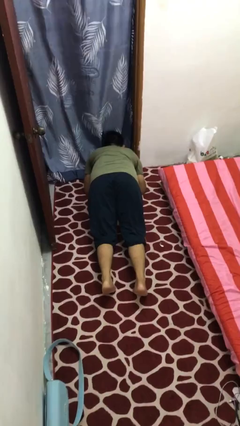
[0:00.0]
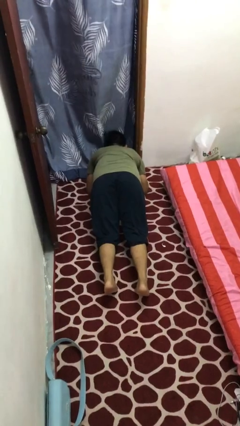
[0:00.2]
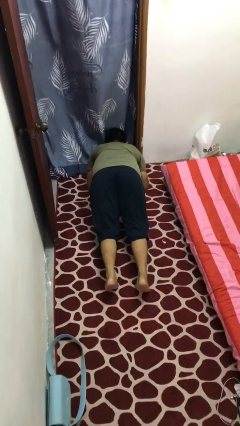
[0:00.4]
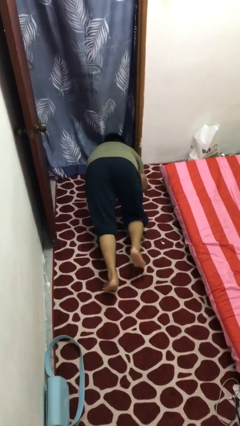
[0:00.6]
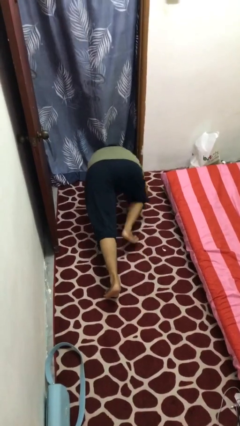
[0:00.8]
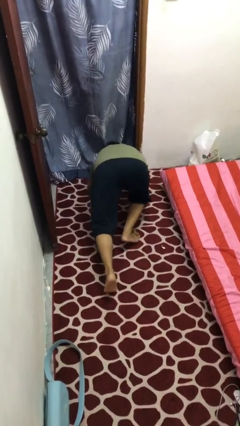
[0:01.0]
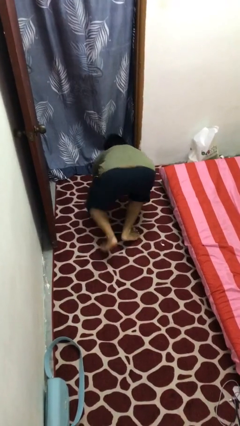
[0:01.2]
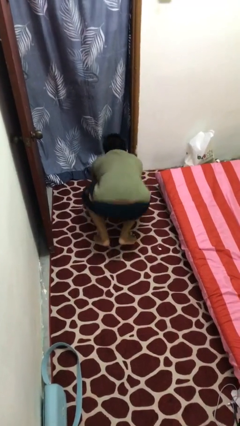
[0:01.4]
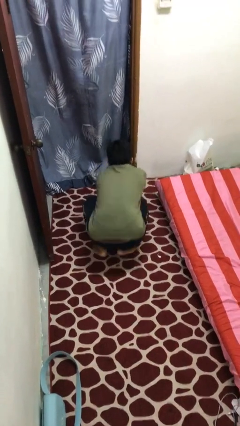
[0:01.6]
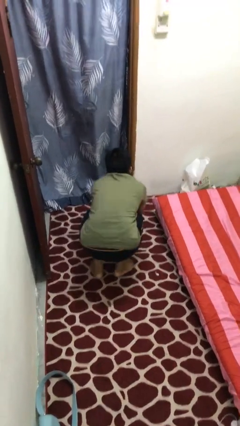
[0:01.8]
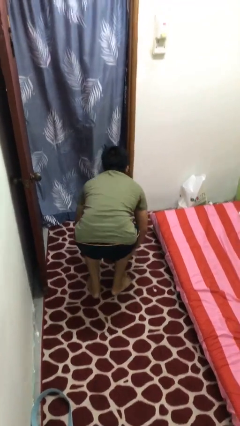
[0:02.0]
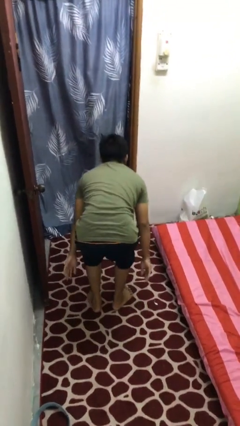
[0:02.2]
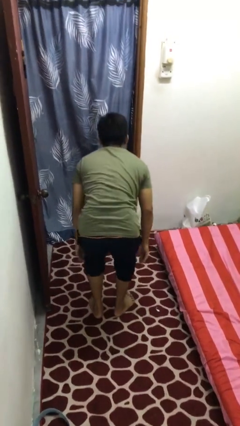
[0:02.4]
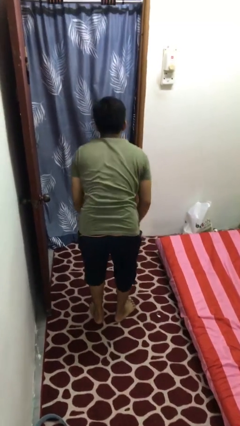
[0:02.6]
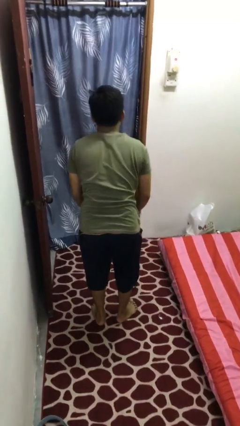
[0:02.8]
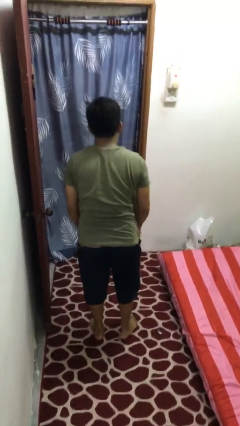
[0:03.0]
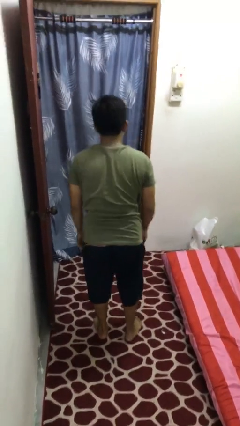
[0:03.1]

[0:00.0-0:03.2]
person stands up from floor

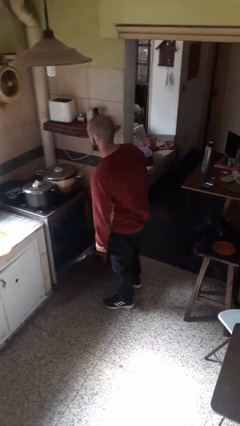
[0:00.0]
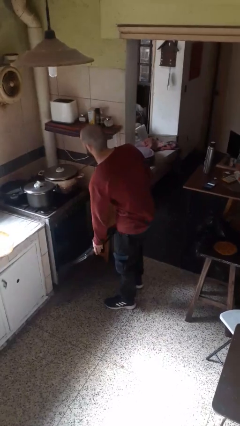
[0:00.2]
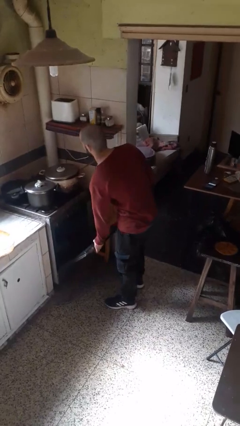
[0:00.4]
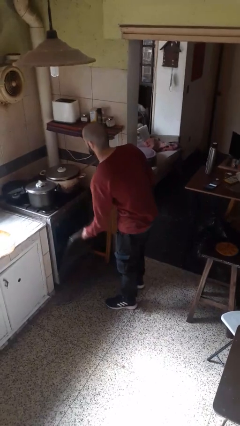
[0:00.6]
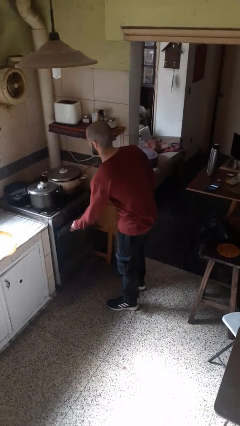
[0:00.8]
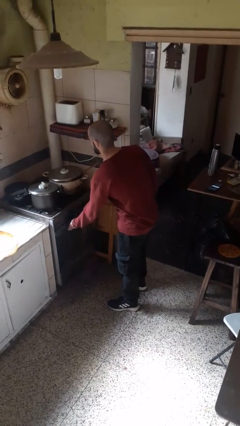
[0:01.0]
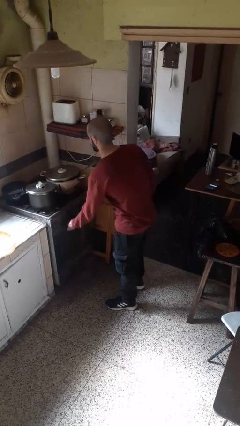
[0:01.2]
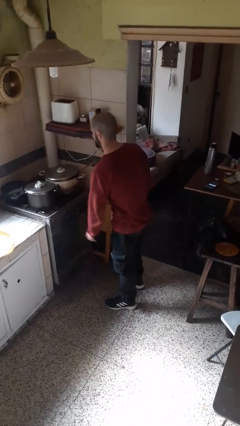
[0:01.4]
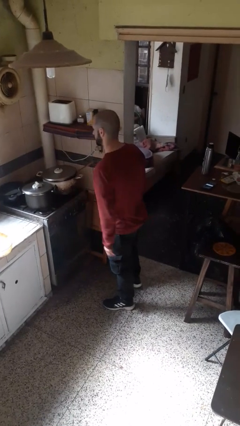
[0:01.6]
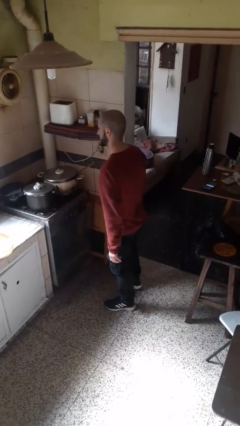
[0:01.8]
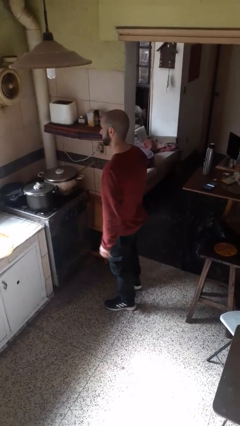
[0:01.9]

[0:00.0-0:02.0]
person closes oven door

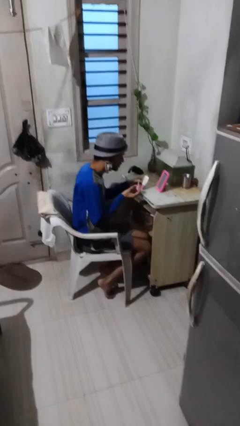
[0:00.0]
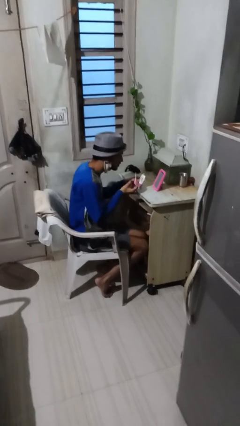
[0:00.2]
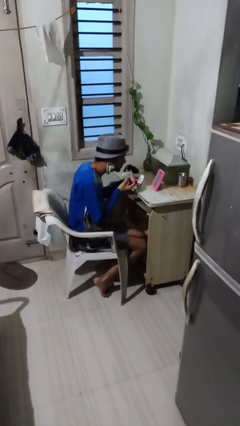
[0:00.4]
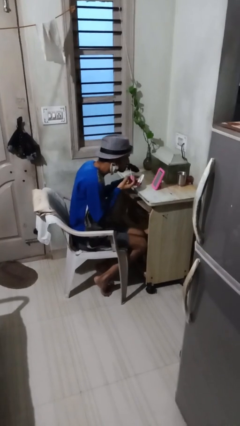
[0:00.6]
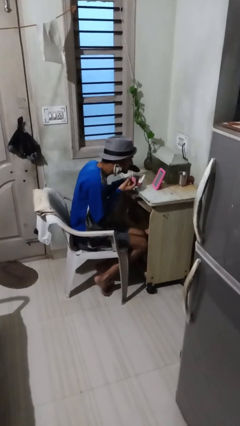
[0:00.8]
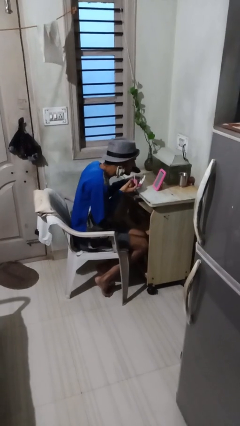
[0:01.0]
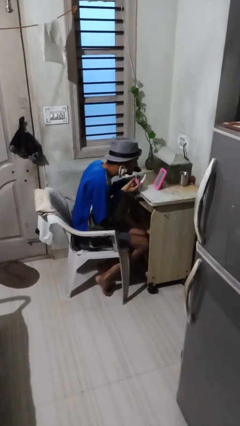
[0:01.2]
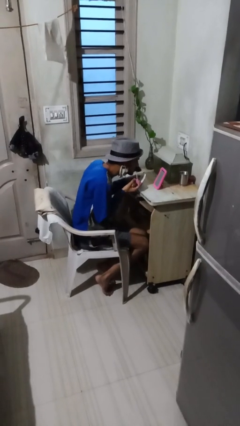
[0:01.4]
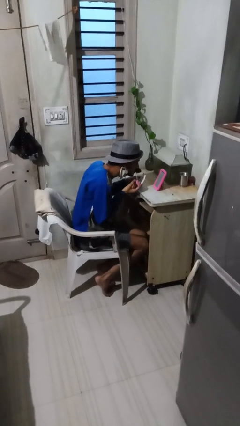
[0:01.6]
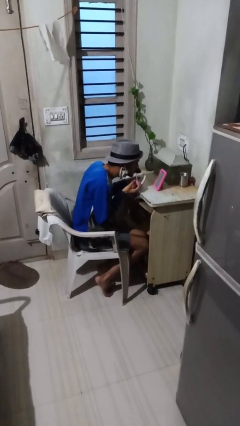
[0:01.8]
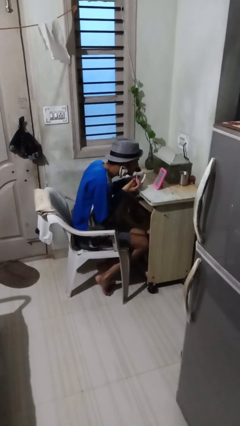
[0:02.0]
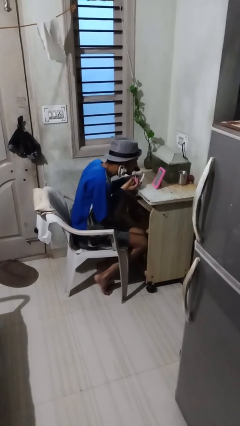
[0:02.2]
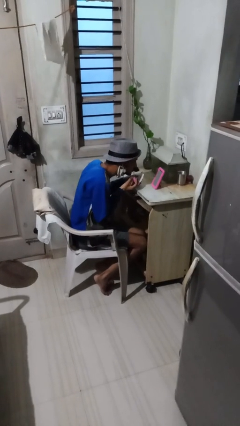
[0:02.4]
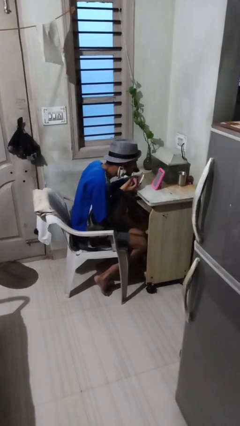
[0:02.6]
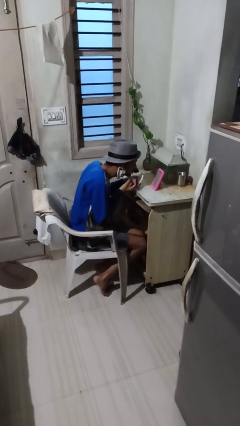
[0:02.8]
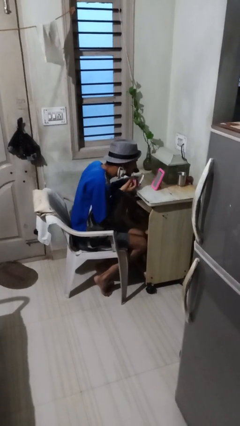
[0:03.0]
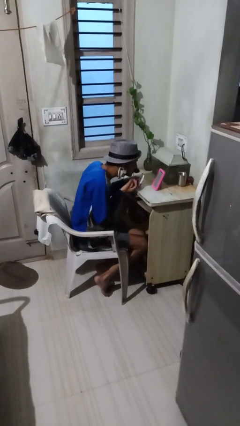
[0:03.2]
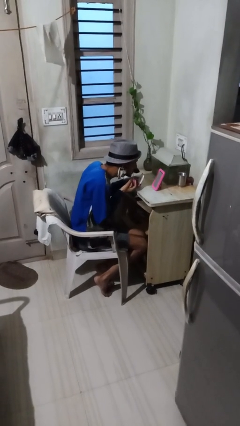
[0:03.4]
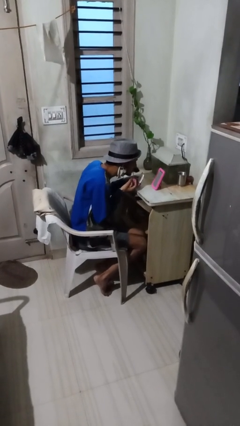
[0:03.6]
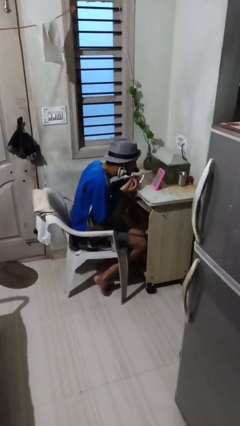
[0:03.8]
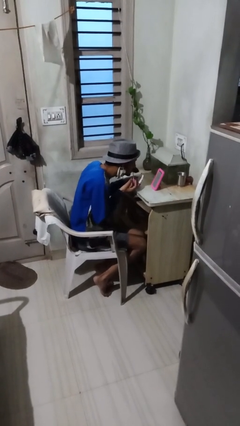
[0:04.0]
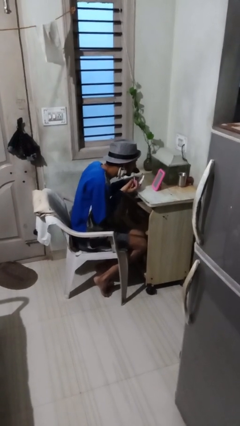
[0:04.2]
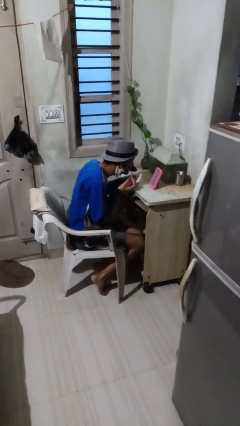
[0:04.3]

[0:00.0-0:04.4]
person applies lip makeup

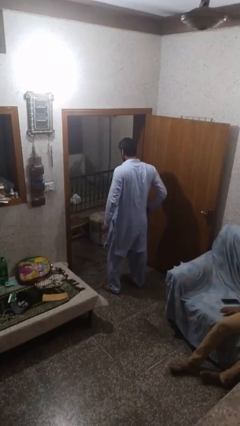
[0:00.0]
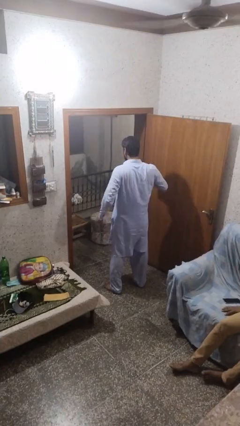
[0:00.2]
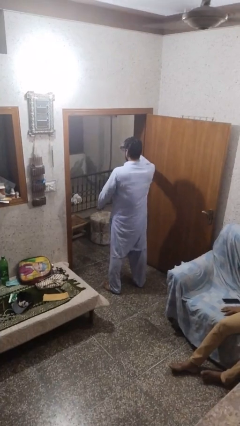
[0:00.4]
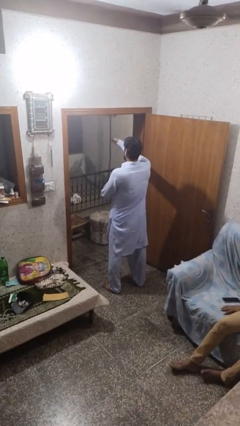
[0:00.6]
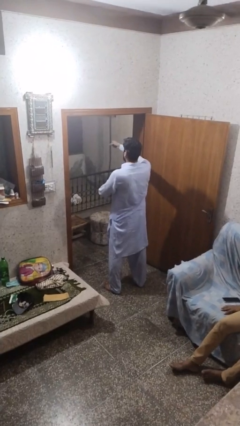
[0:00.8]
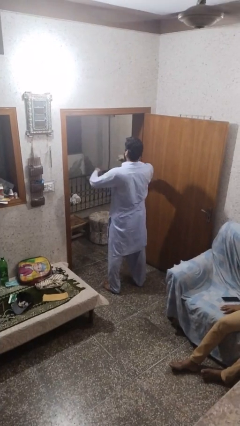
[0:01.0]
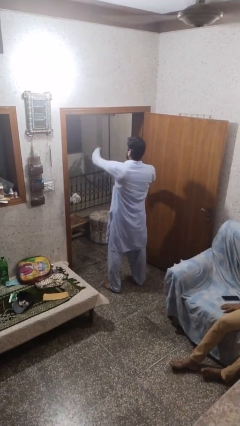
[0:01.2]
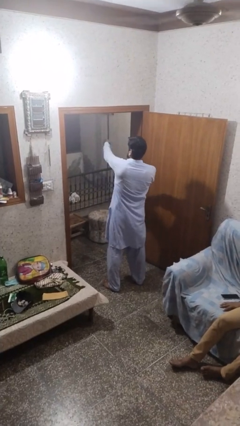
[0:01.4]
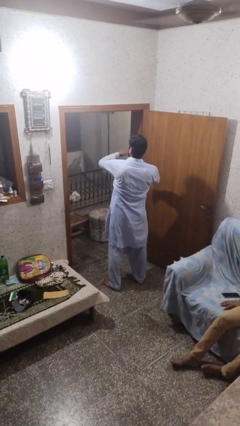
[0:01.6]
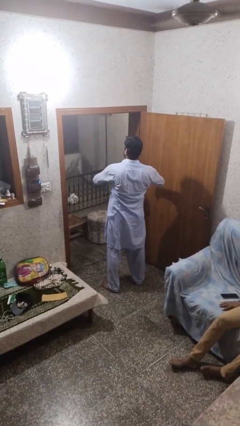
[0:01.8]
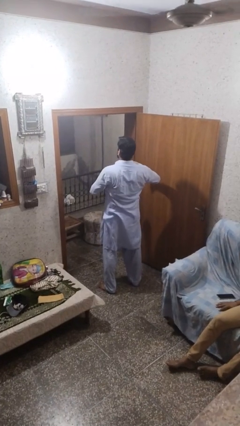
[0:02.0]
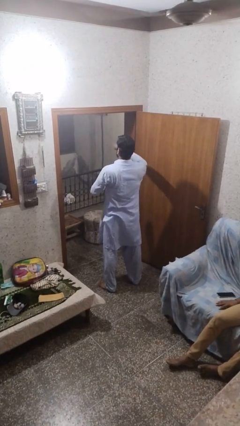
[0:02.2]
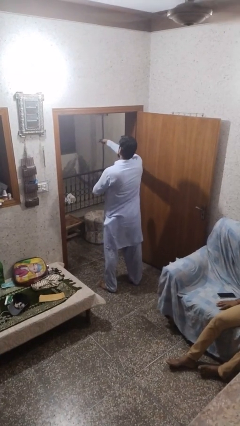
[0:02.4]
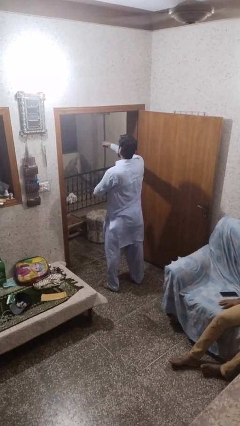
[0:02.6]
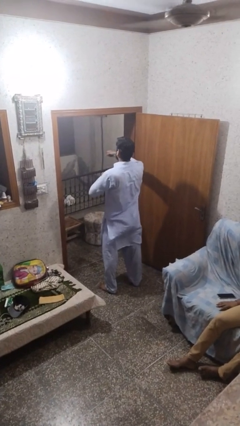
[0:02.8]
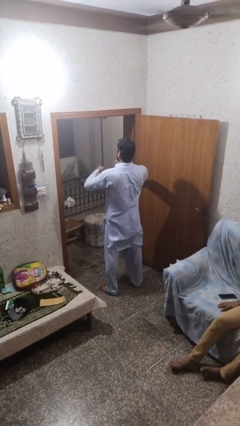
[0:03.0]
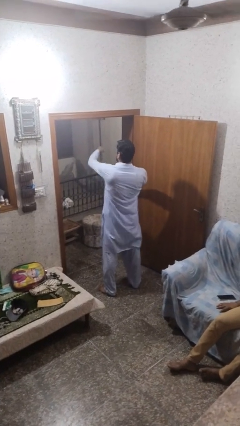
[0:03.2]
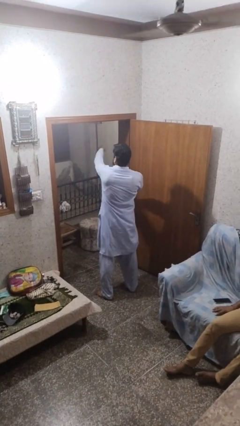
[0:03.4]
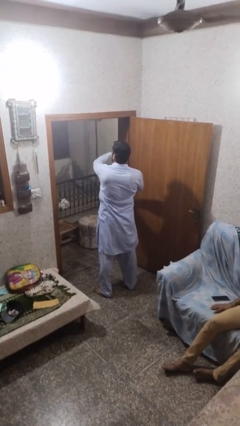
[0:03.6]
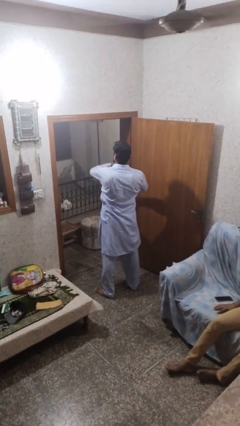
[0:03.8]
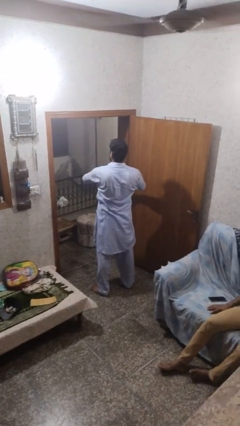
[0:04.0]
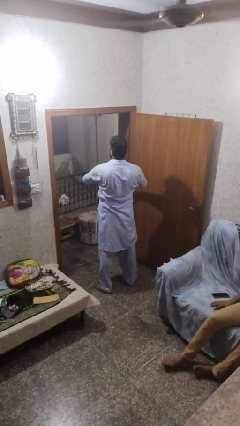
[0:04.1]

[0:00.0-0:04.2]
person punches

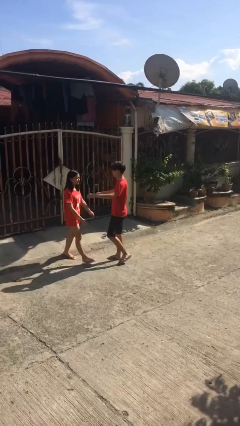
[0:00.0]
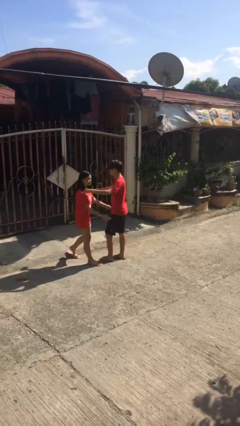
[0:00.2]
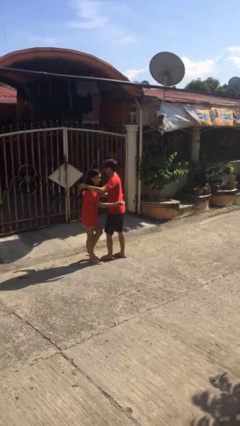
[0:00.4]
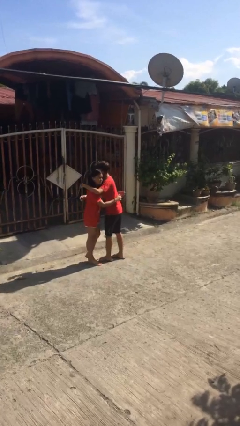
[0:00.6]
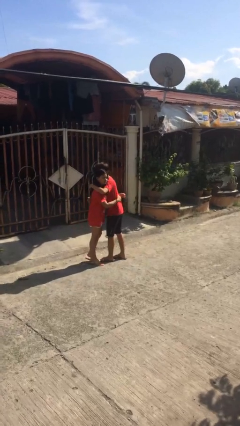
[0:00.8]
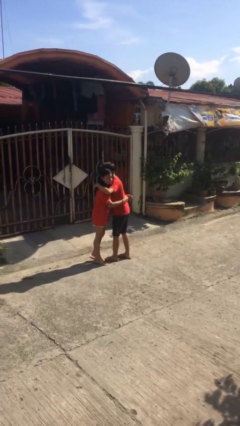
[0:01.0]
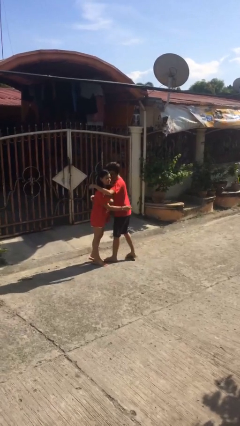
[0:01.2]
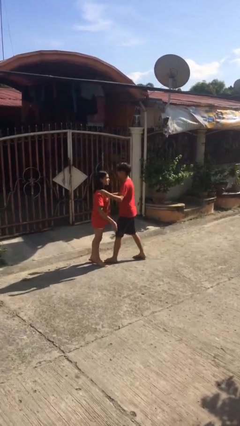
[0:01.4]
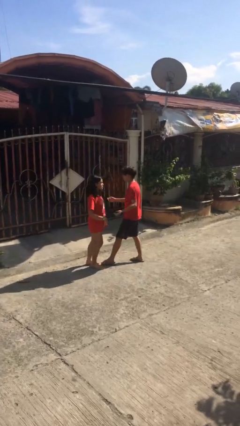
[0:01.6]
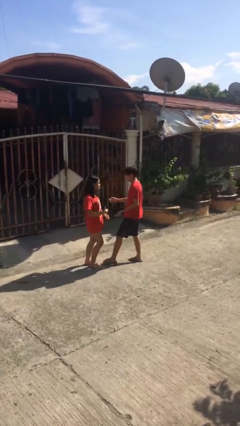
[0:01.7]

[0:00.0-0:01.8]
person embraces person

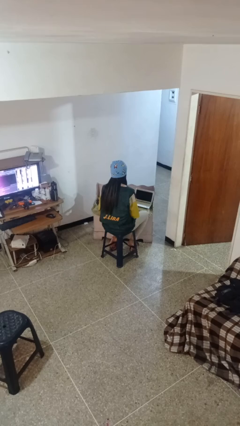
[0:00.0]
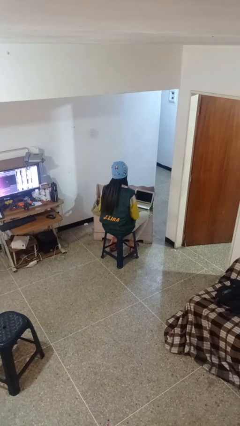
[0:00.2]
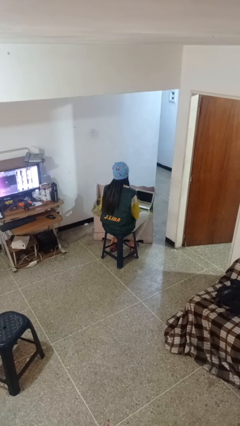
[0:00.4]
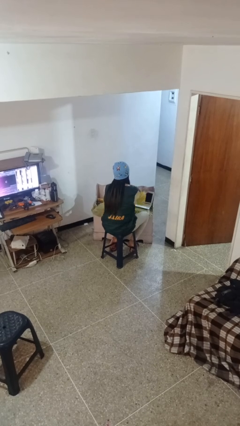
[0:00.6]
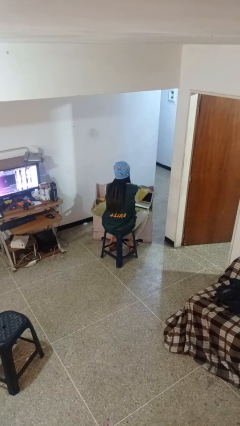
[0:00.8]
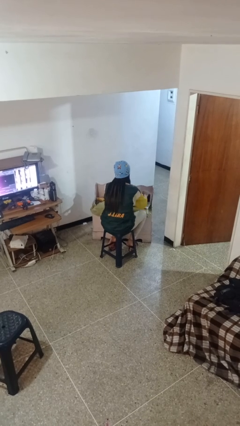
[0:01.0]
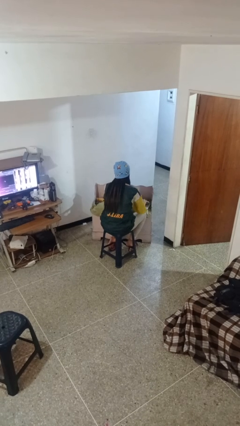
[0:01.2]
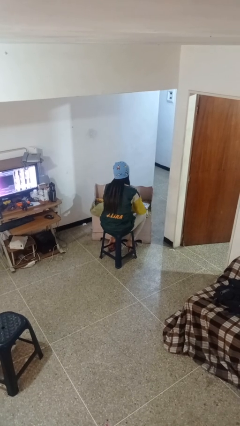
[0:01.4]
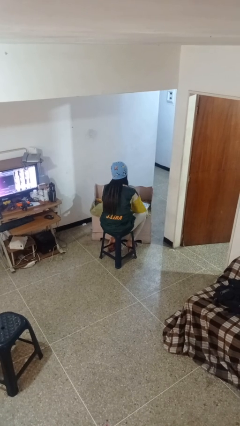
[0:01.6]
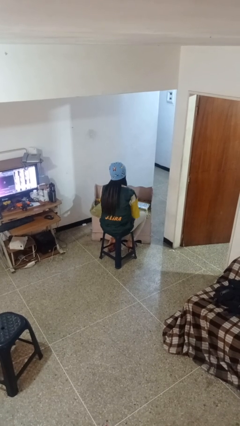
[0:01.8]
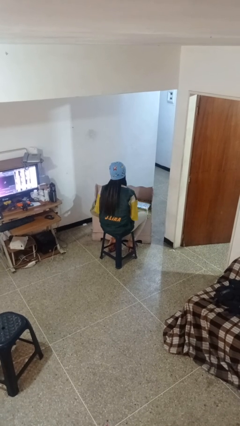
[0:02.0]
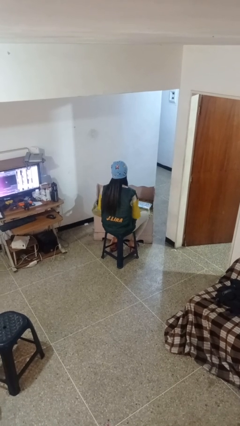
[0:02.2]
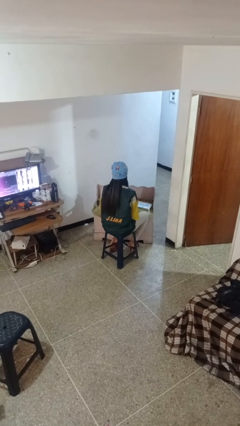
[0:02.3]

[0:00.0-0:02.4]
person closes laptop
